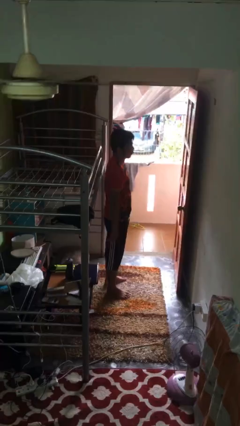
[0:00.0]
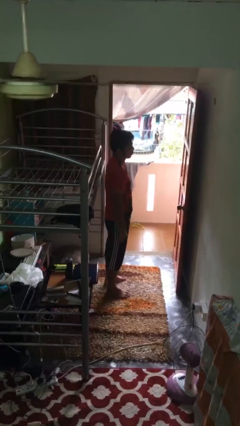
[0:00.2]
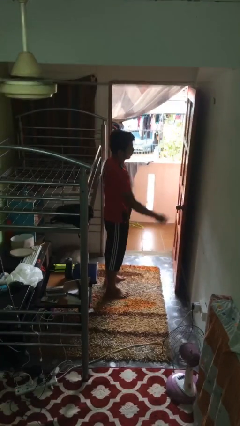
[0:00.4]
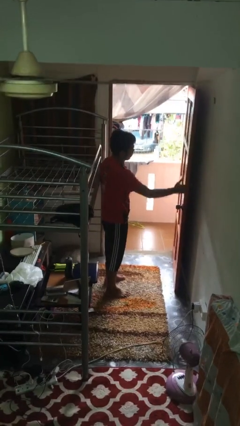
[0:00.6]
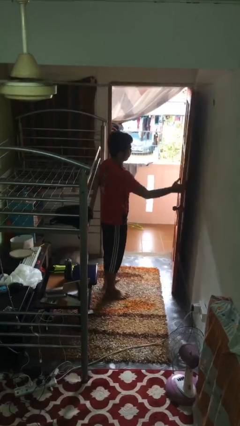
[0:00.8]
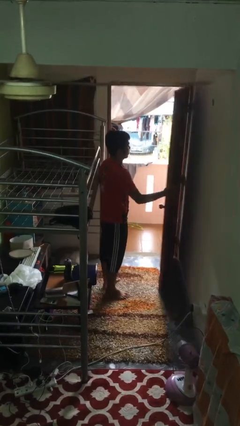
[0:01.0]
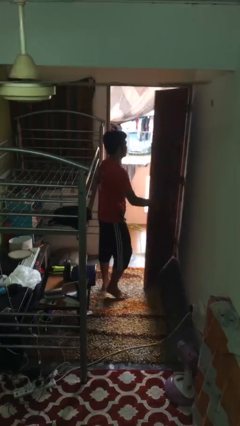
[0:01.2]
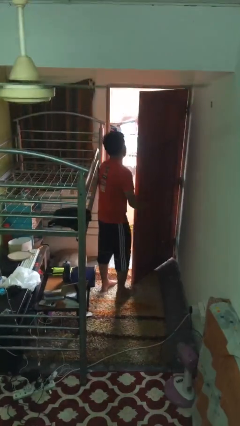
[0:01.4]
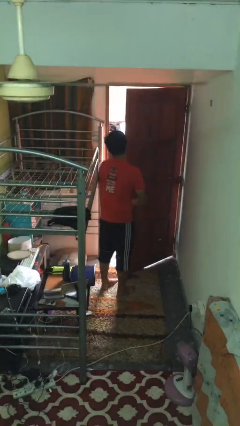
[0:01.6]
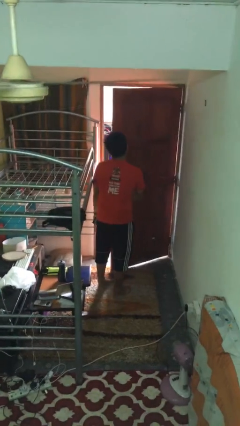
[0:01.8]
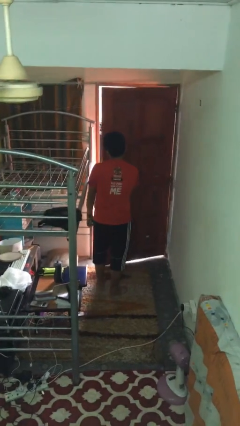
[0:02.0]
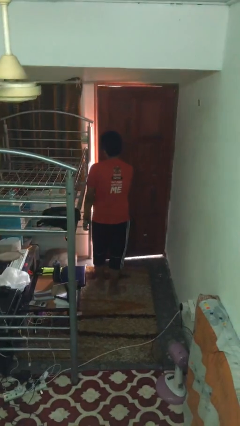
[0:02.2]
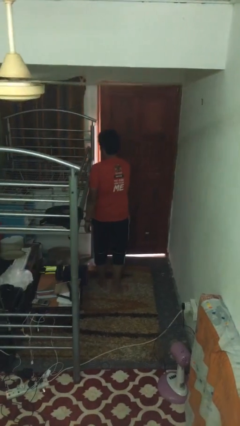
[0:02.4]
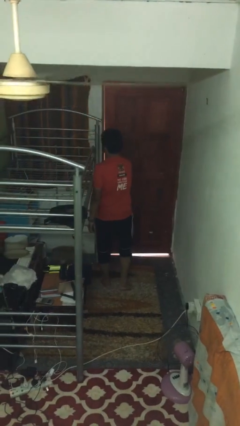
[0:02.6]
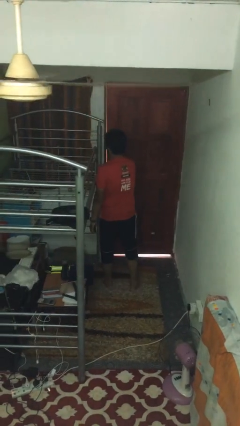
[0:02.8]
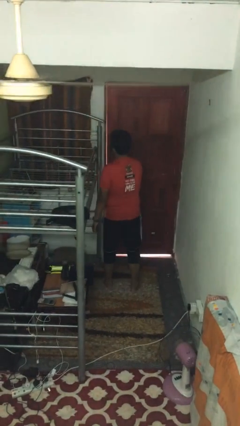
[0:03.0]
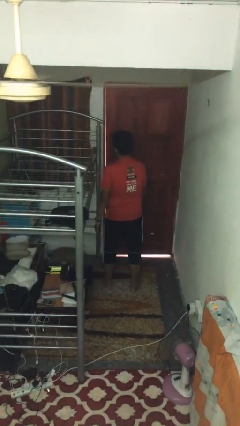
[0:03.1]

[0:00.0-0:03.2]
person closes facility door

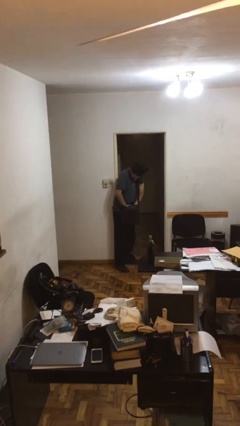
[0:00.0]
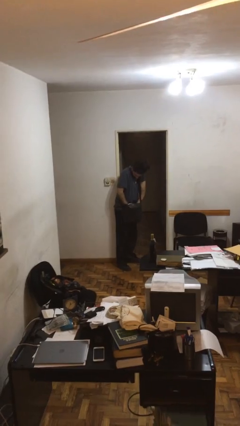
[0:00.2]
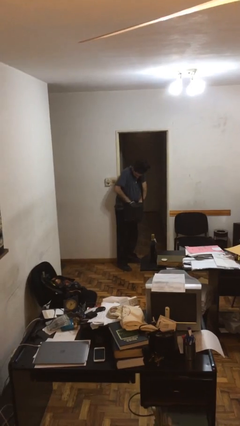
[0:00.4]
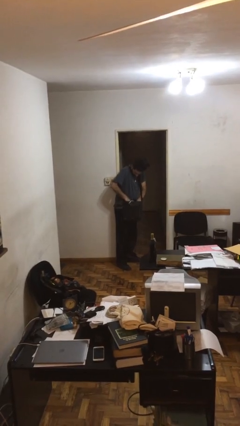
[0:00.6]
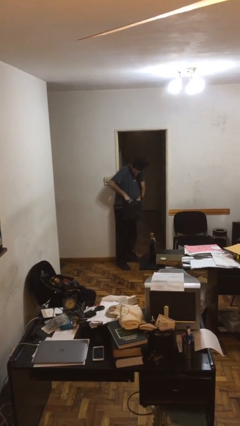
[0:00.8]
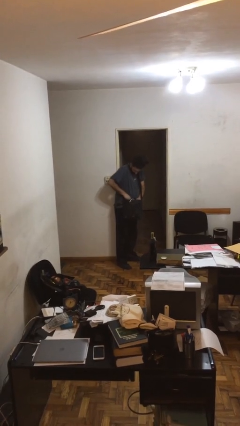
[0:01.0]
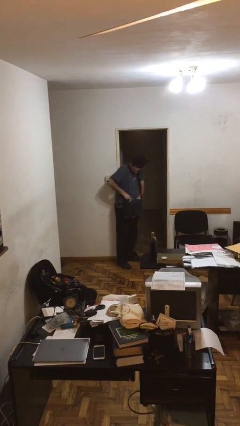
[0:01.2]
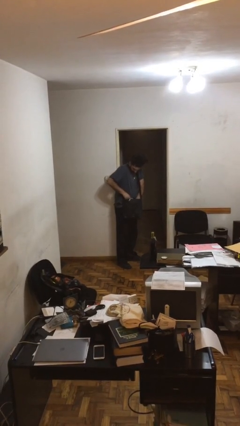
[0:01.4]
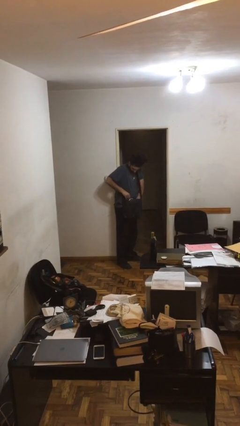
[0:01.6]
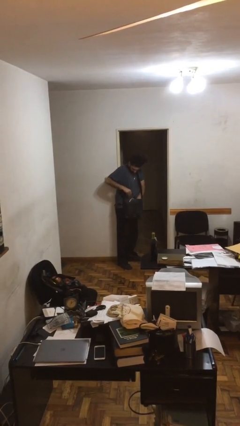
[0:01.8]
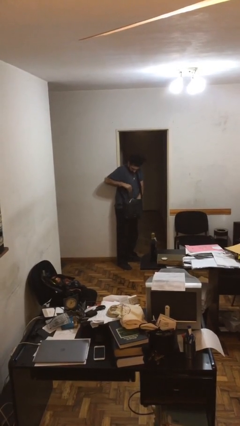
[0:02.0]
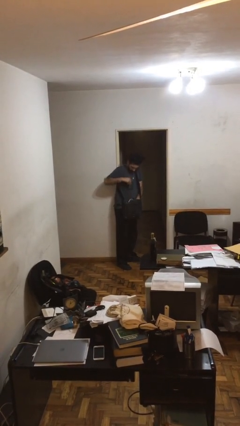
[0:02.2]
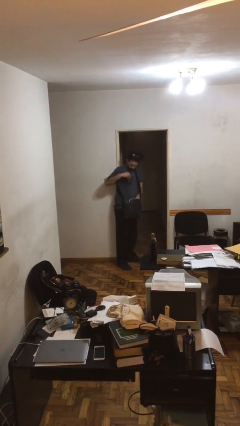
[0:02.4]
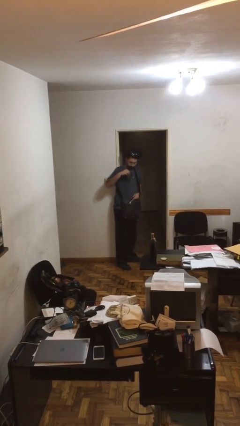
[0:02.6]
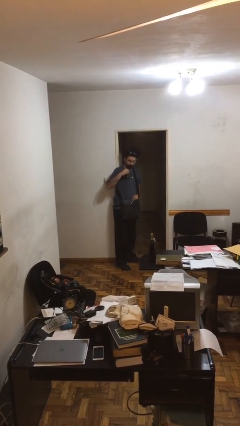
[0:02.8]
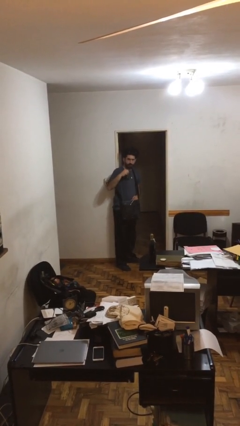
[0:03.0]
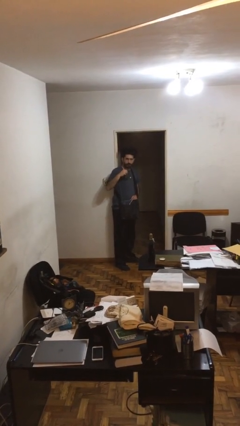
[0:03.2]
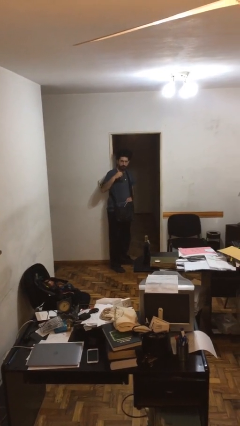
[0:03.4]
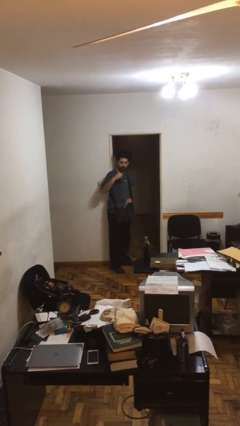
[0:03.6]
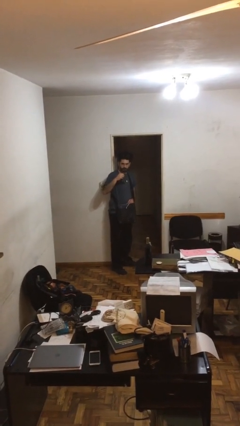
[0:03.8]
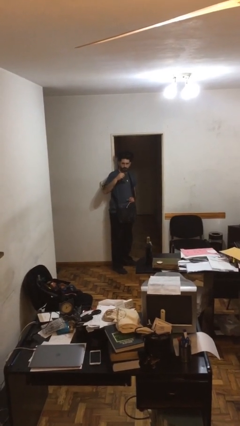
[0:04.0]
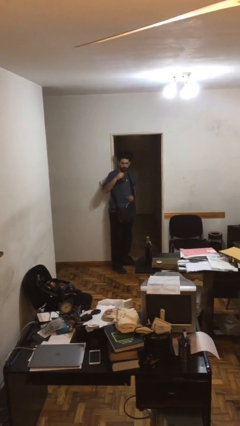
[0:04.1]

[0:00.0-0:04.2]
person takes object from purse

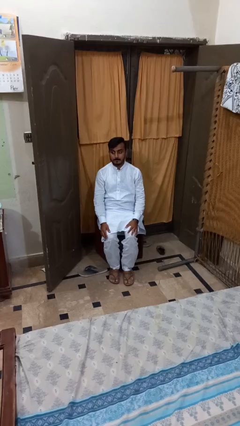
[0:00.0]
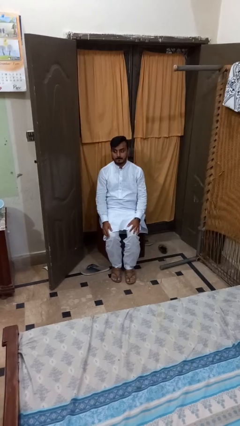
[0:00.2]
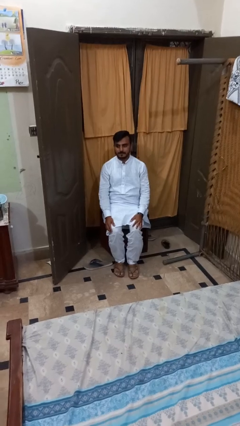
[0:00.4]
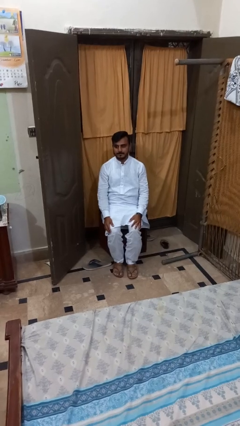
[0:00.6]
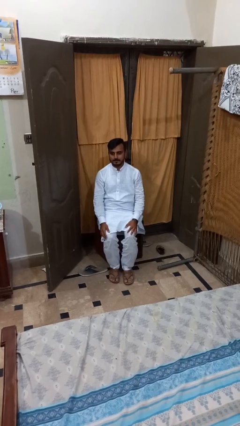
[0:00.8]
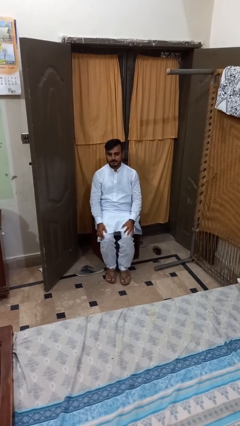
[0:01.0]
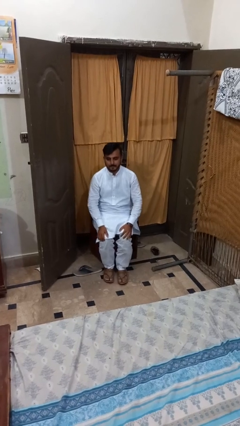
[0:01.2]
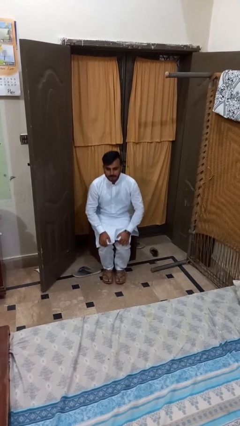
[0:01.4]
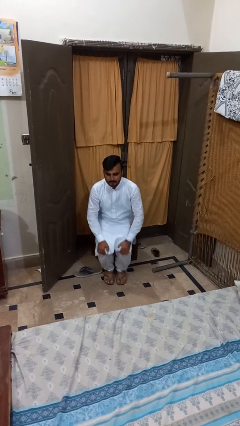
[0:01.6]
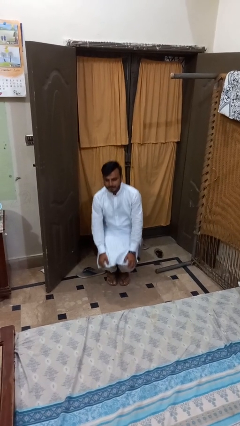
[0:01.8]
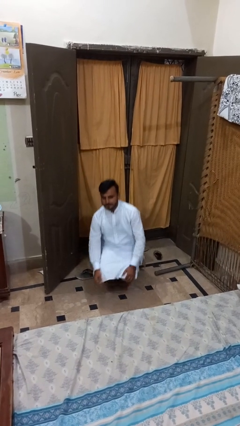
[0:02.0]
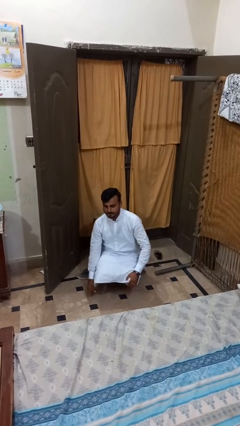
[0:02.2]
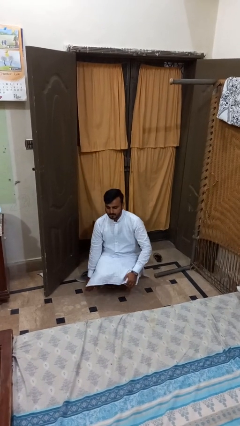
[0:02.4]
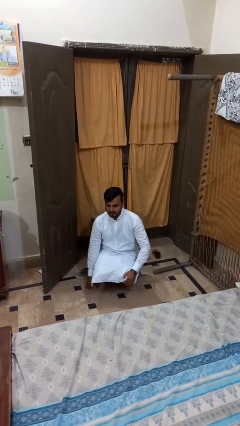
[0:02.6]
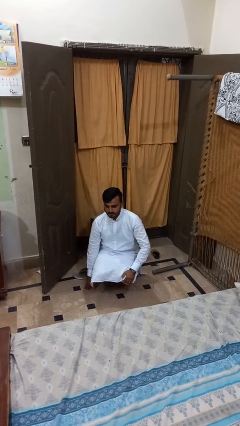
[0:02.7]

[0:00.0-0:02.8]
person falls from chair

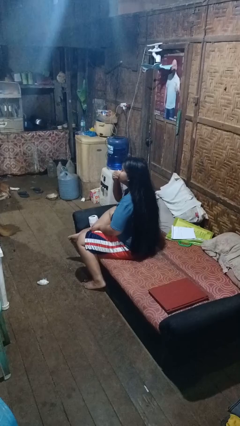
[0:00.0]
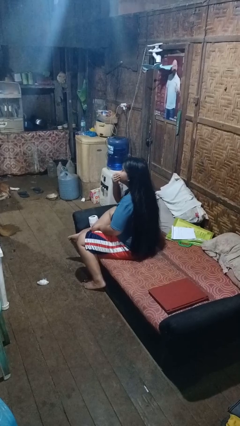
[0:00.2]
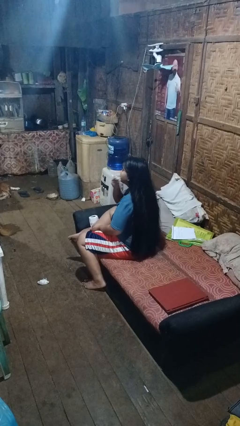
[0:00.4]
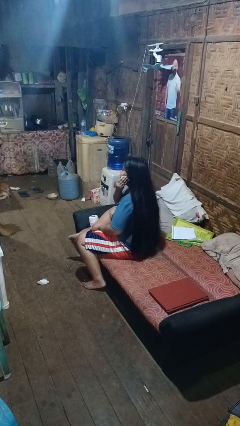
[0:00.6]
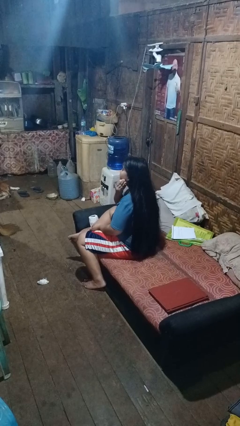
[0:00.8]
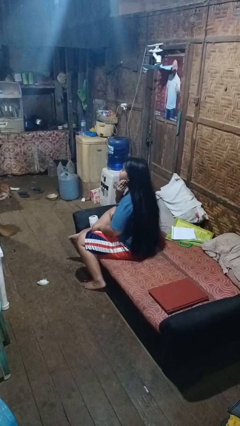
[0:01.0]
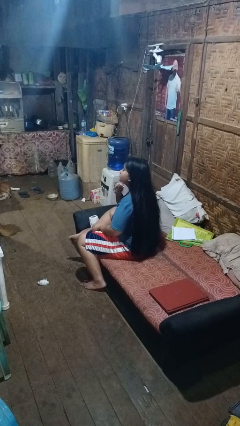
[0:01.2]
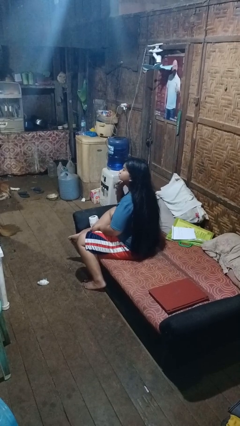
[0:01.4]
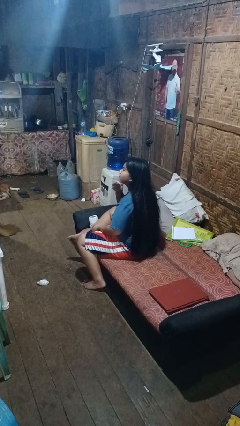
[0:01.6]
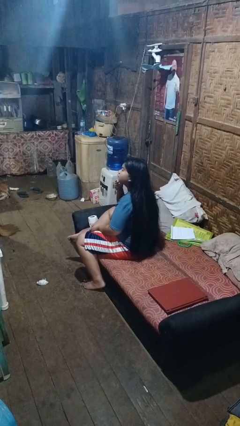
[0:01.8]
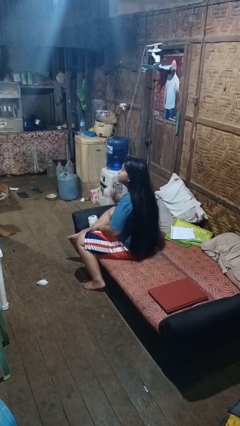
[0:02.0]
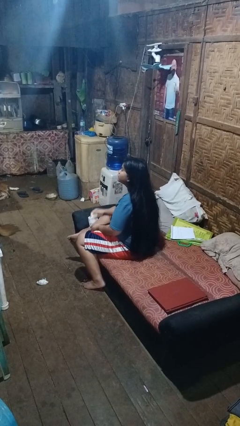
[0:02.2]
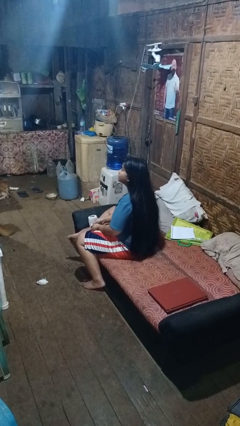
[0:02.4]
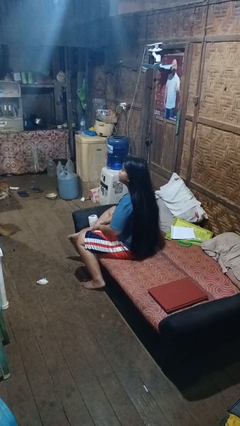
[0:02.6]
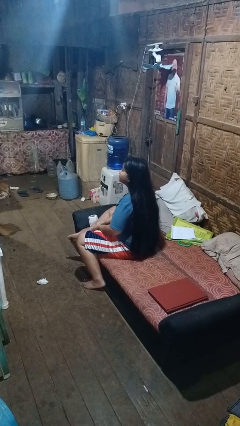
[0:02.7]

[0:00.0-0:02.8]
person wipes mouth with napkin

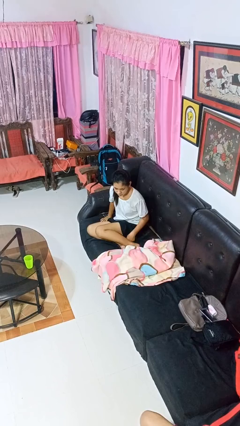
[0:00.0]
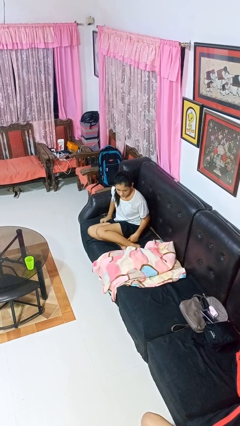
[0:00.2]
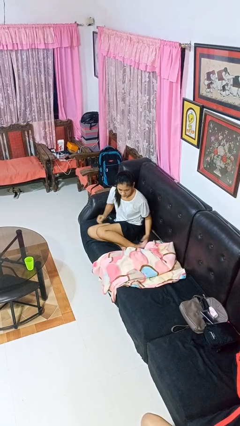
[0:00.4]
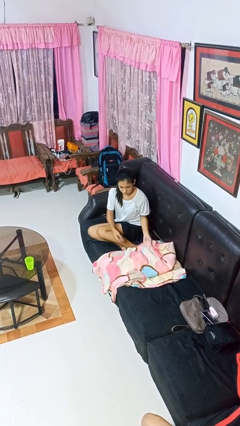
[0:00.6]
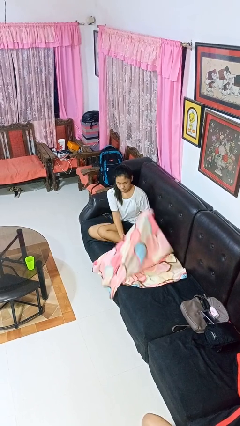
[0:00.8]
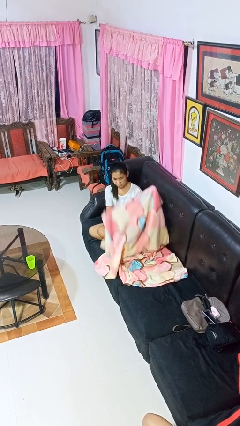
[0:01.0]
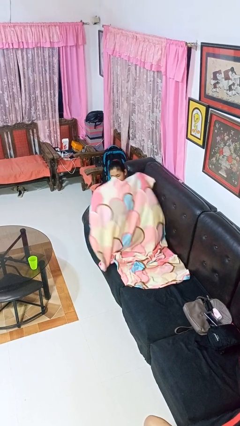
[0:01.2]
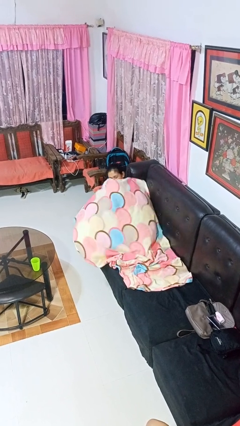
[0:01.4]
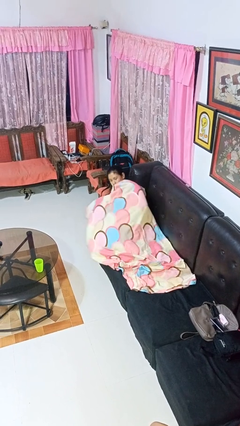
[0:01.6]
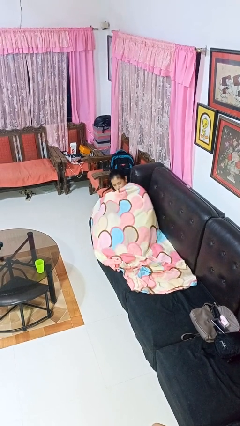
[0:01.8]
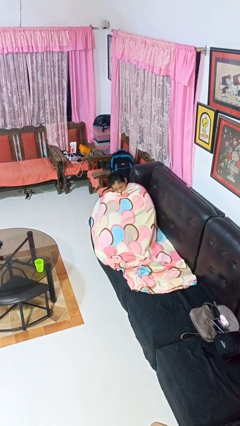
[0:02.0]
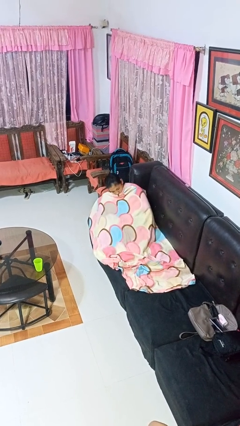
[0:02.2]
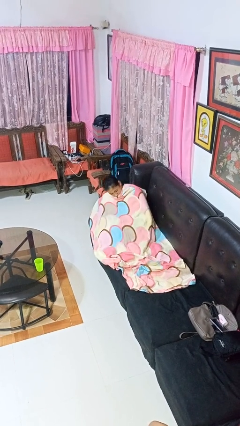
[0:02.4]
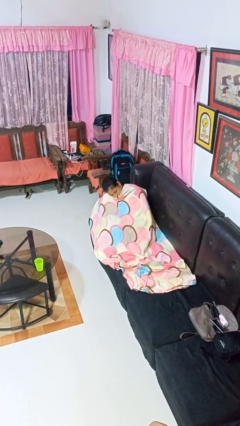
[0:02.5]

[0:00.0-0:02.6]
person covers with blanket

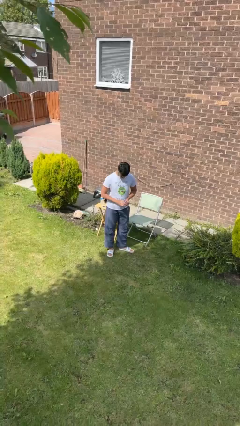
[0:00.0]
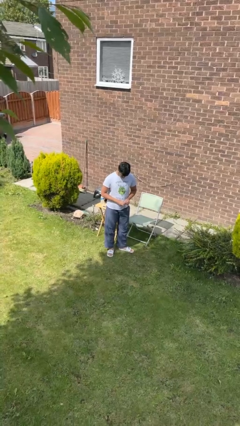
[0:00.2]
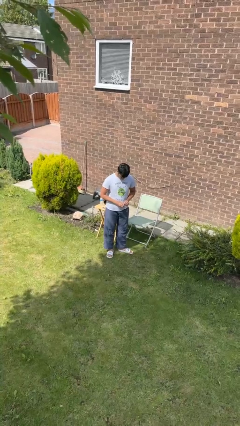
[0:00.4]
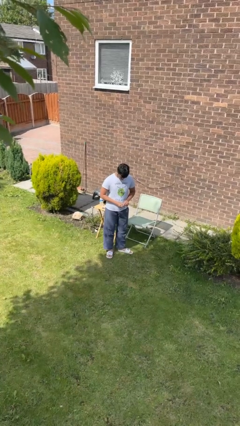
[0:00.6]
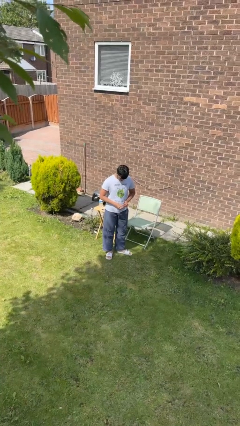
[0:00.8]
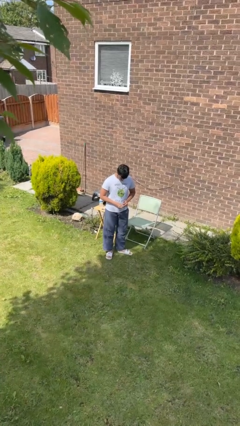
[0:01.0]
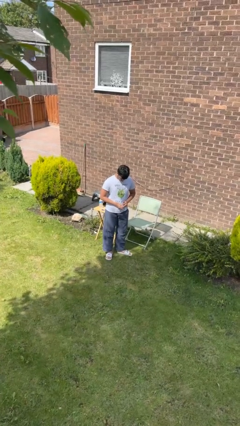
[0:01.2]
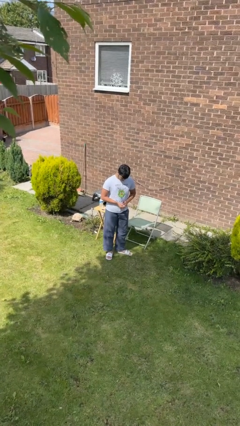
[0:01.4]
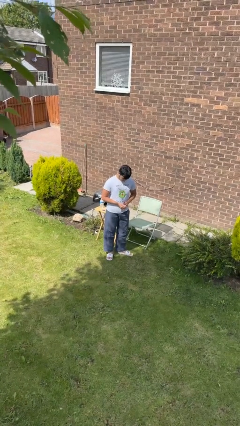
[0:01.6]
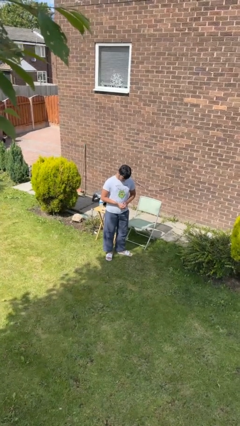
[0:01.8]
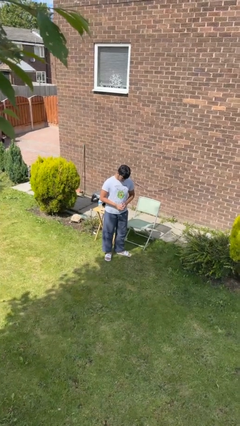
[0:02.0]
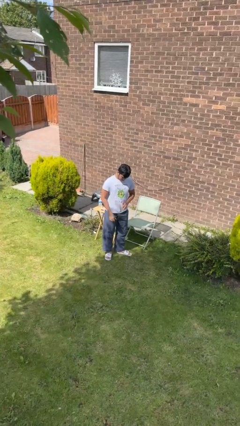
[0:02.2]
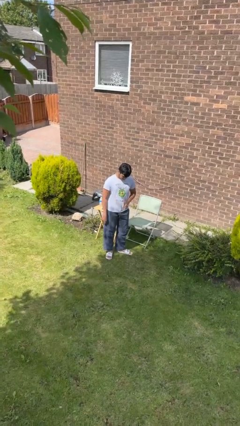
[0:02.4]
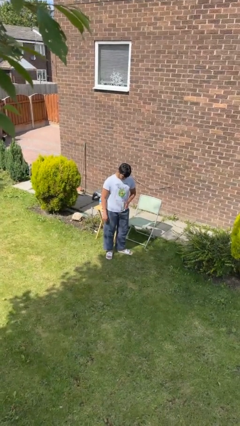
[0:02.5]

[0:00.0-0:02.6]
person puts on ring
